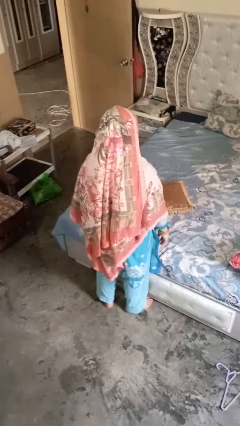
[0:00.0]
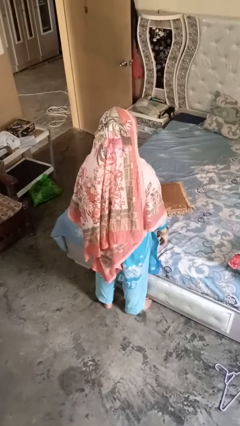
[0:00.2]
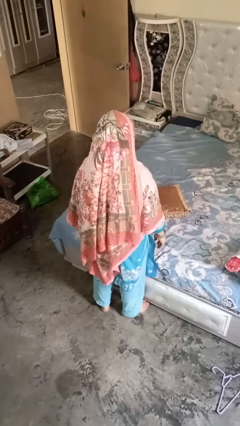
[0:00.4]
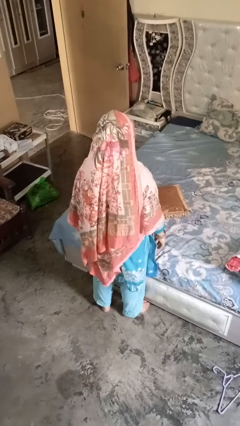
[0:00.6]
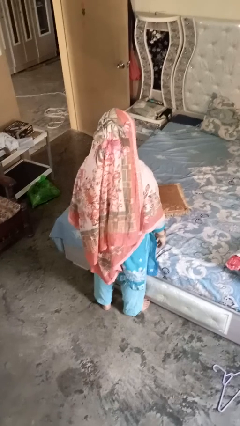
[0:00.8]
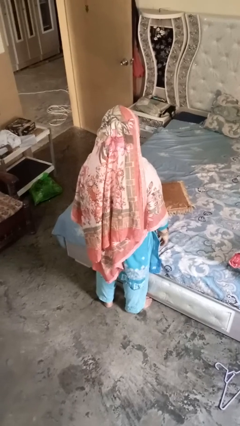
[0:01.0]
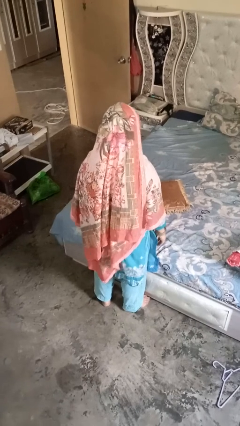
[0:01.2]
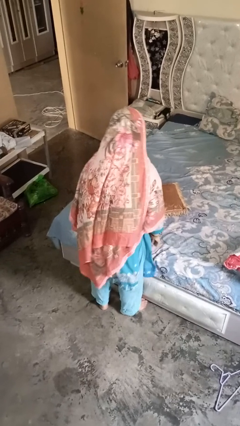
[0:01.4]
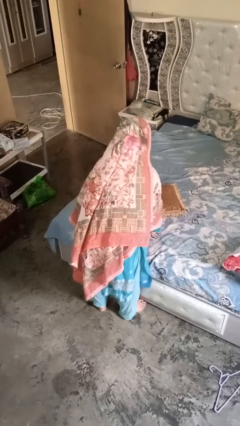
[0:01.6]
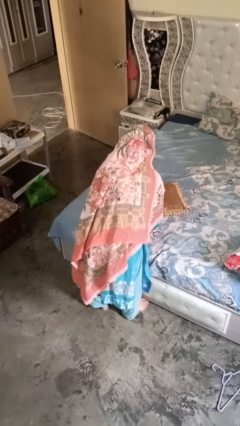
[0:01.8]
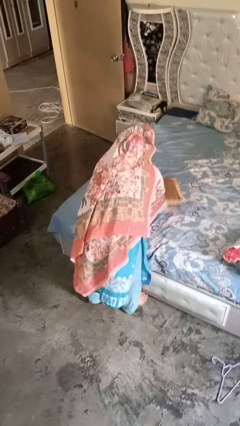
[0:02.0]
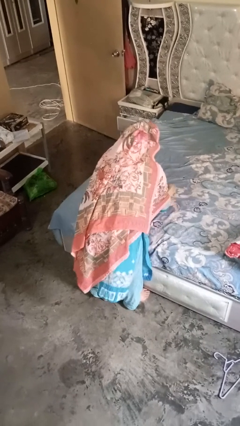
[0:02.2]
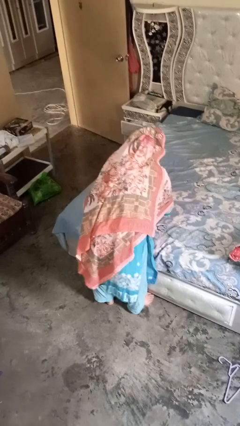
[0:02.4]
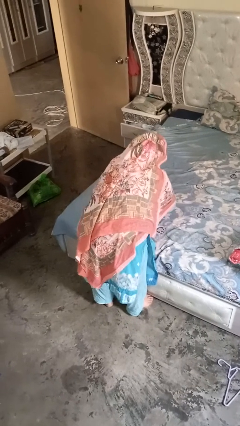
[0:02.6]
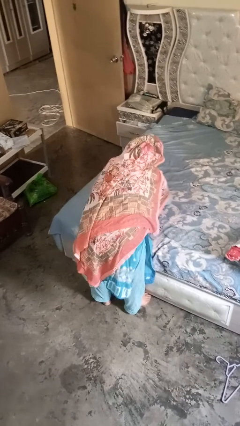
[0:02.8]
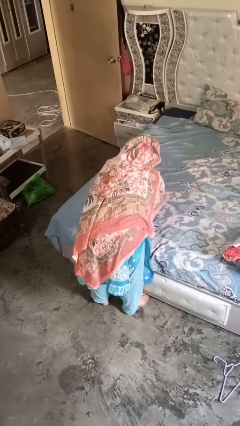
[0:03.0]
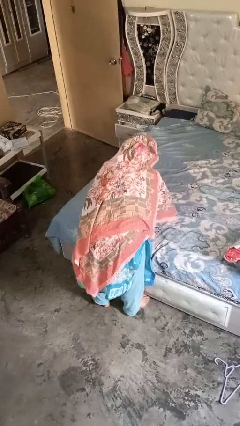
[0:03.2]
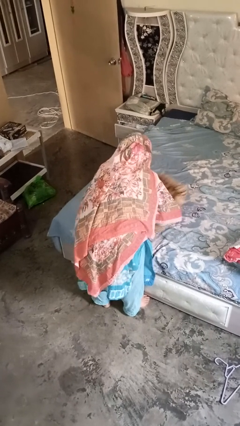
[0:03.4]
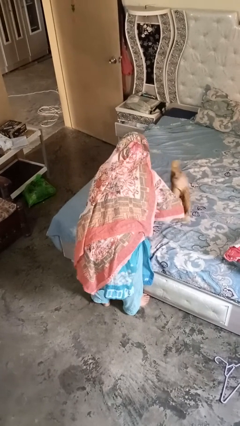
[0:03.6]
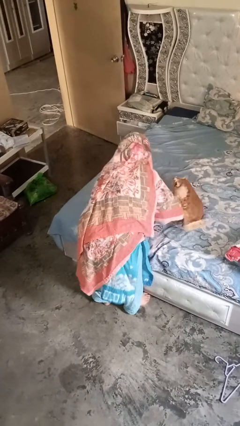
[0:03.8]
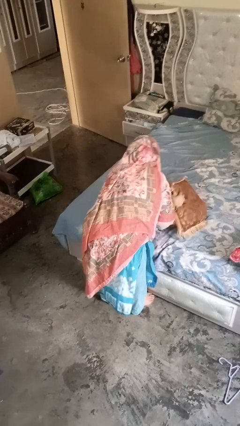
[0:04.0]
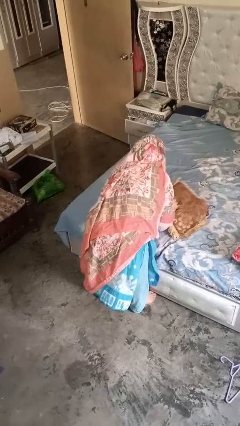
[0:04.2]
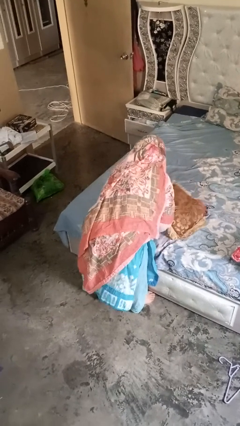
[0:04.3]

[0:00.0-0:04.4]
person searches under bed

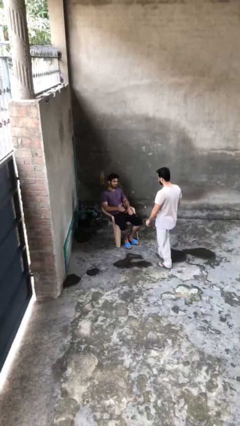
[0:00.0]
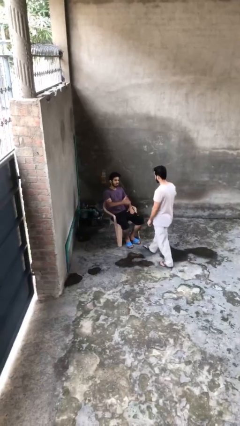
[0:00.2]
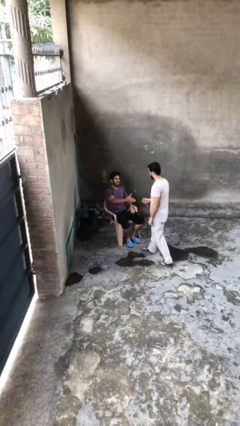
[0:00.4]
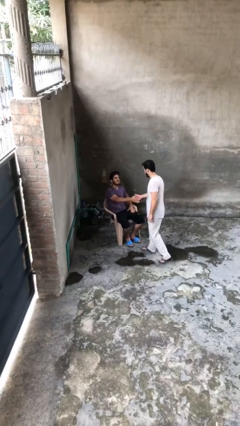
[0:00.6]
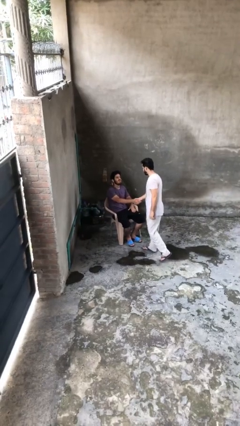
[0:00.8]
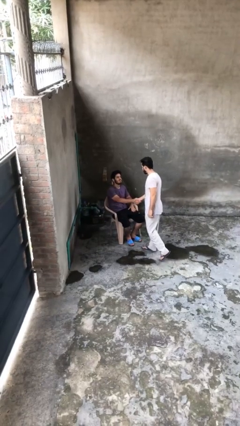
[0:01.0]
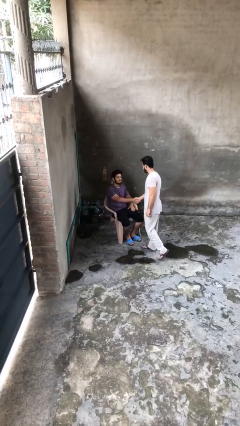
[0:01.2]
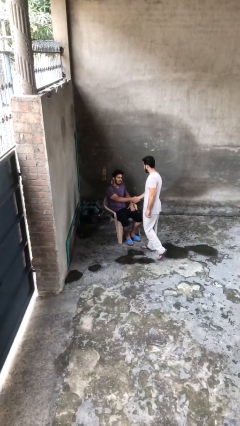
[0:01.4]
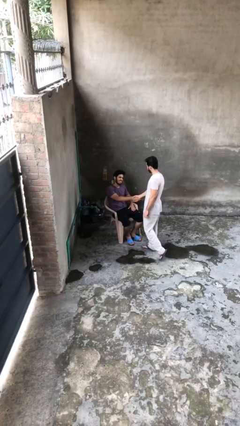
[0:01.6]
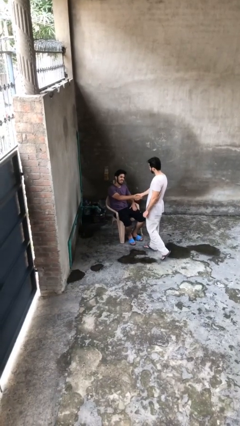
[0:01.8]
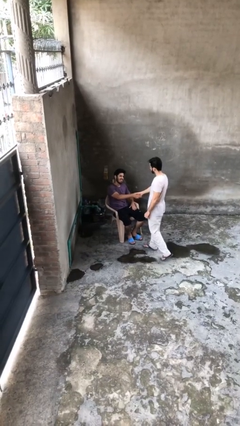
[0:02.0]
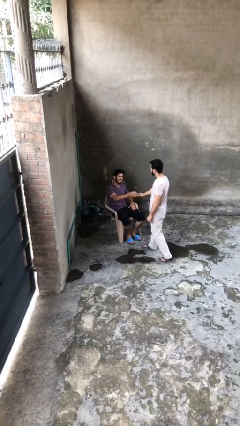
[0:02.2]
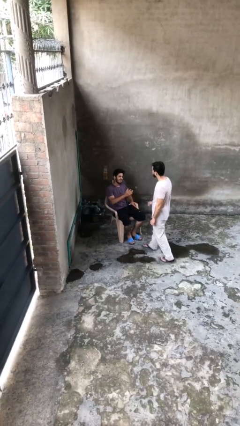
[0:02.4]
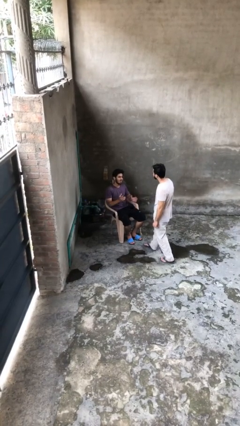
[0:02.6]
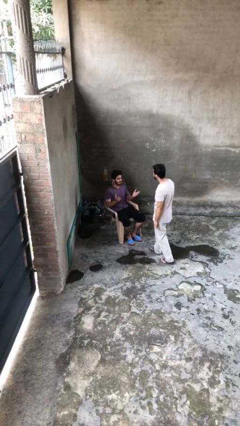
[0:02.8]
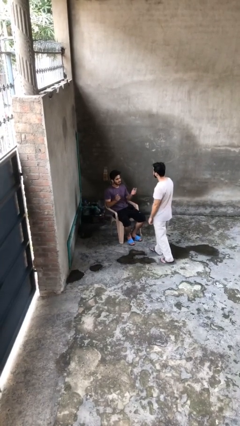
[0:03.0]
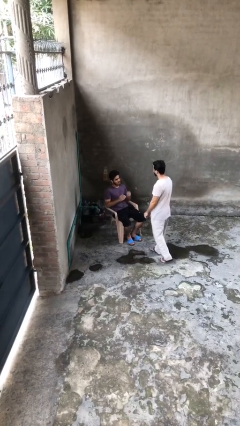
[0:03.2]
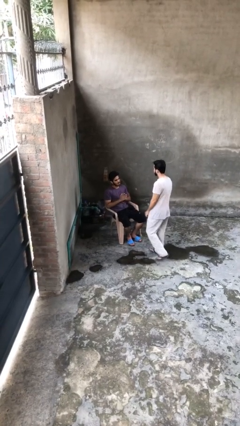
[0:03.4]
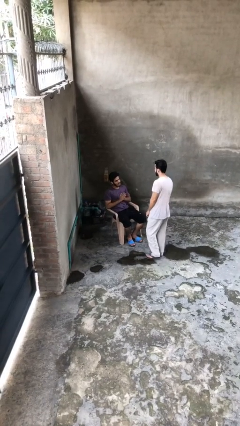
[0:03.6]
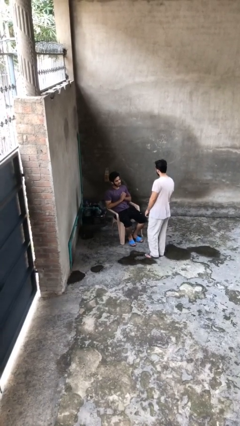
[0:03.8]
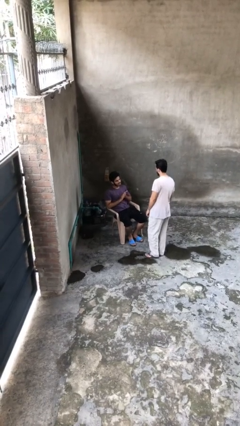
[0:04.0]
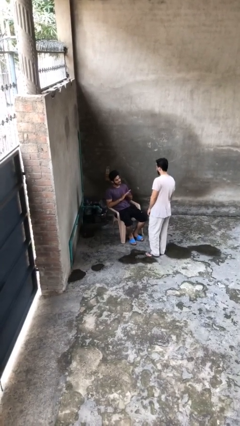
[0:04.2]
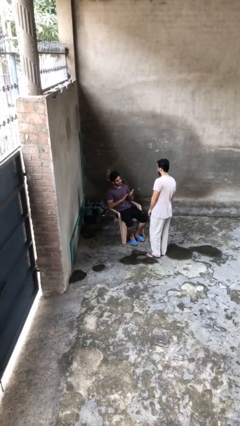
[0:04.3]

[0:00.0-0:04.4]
person shakes hand

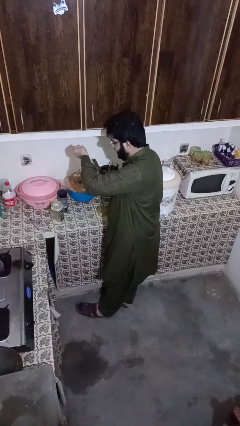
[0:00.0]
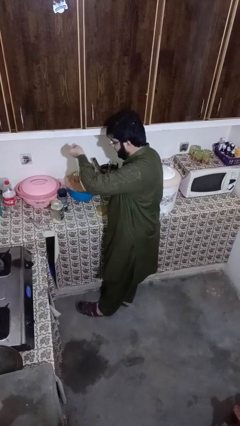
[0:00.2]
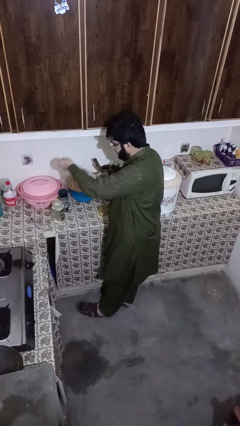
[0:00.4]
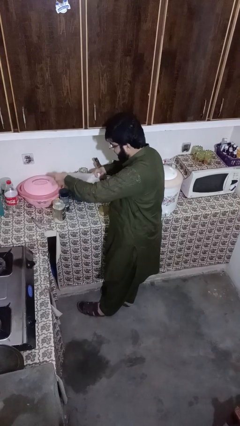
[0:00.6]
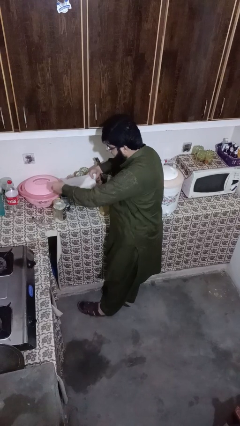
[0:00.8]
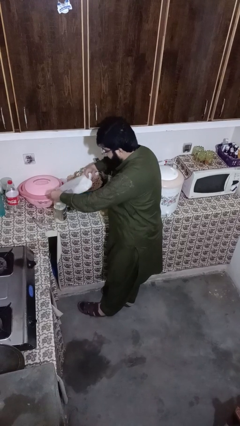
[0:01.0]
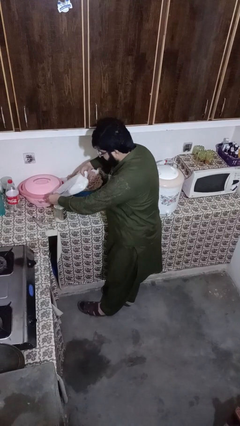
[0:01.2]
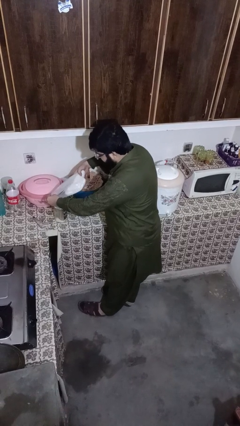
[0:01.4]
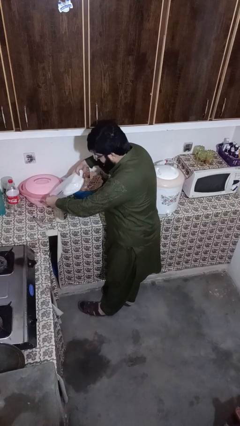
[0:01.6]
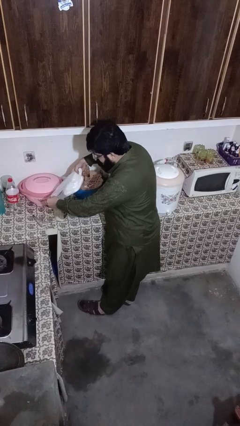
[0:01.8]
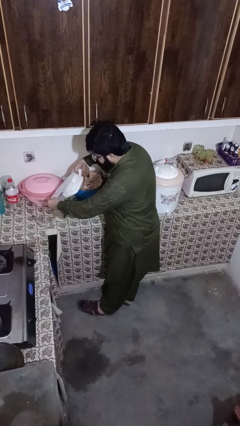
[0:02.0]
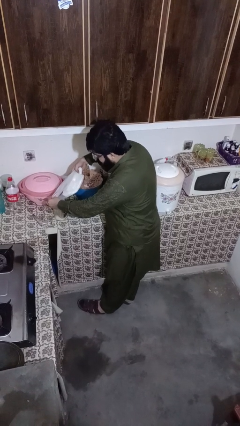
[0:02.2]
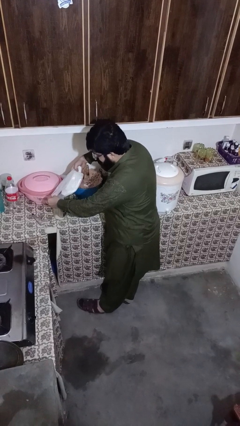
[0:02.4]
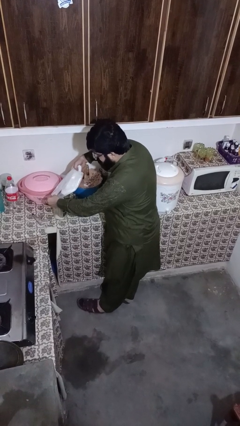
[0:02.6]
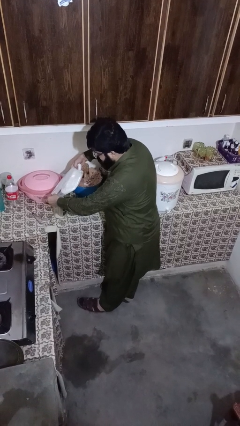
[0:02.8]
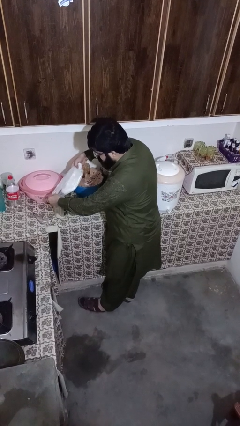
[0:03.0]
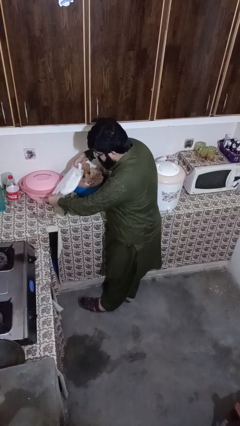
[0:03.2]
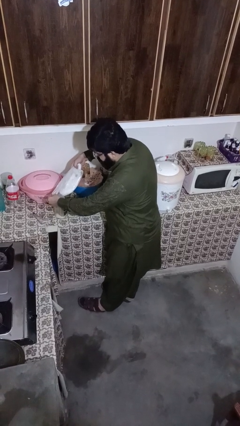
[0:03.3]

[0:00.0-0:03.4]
person pours into bowl

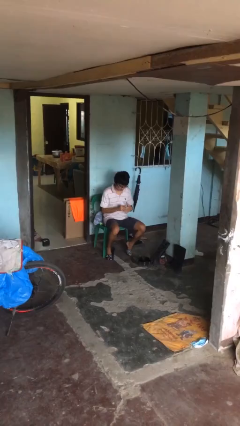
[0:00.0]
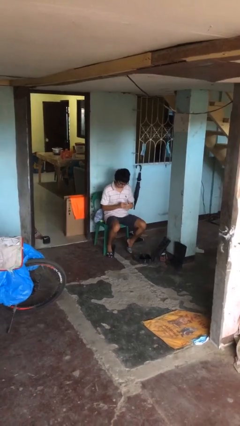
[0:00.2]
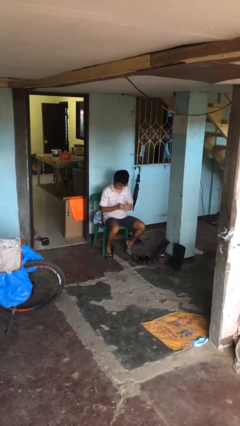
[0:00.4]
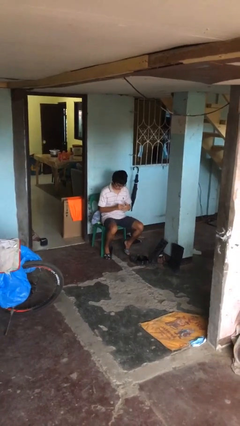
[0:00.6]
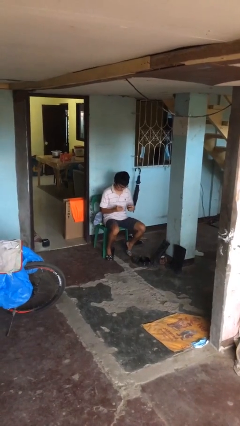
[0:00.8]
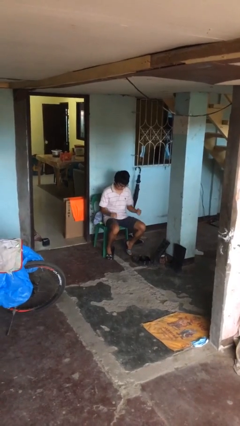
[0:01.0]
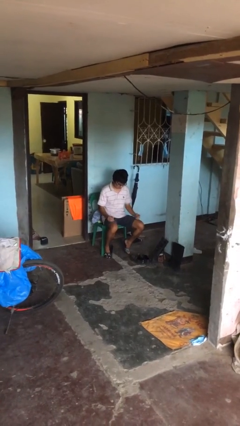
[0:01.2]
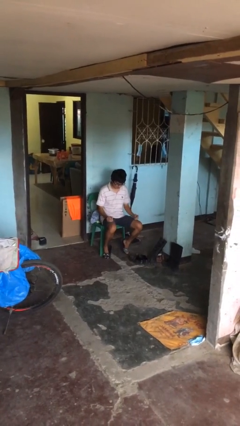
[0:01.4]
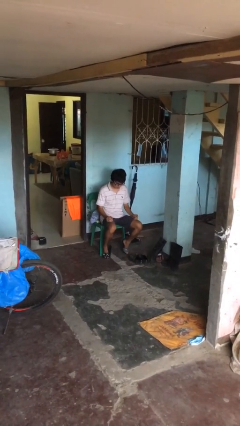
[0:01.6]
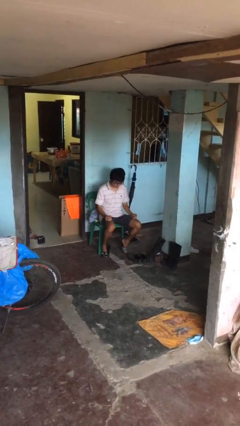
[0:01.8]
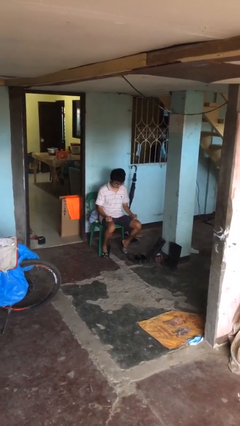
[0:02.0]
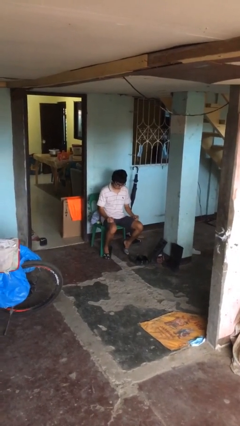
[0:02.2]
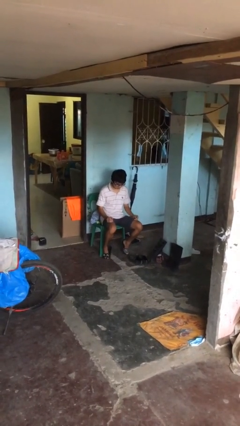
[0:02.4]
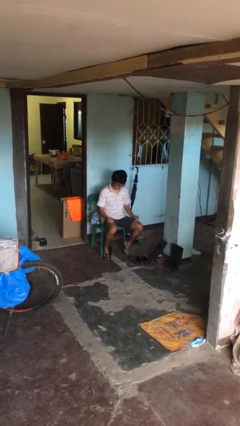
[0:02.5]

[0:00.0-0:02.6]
person takes off ring

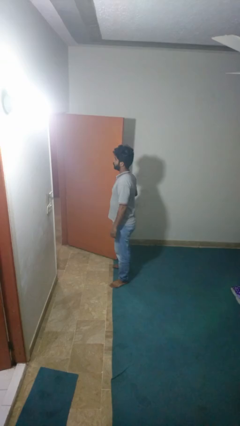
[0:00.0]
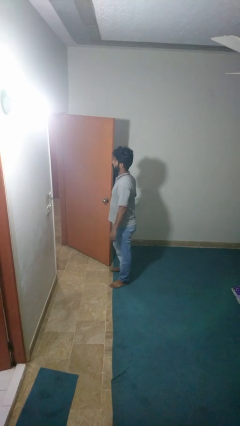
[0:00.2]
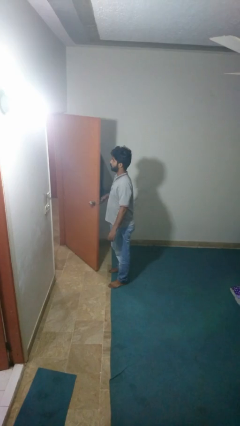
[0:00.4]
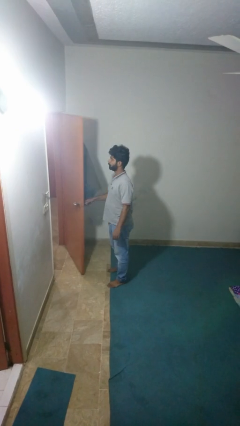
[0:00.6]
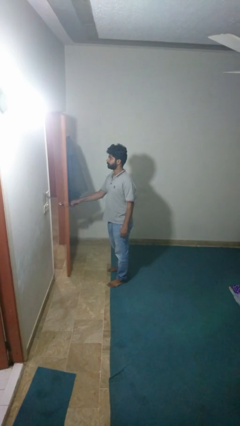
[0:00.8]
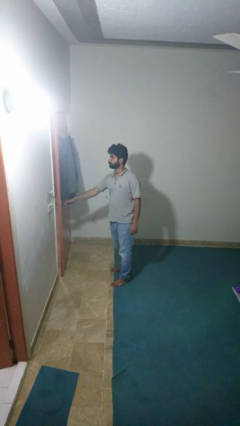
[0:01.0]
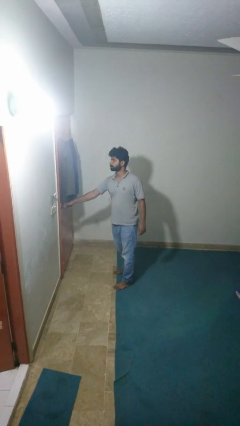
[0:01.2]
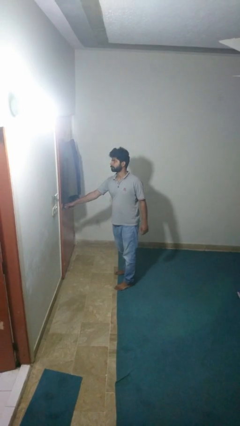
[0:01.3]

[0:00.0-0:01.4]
person closes facility door

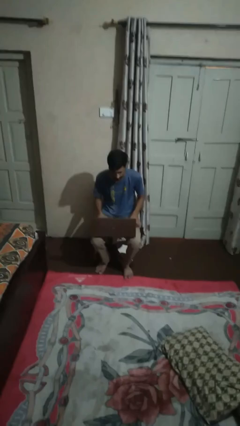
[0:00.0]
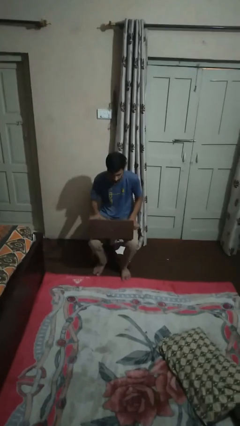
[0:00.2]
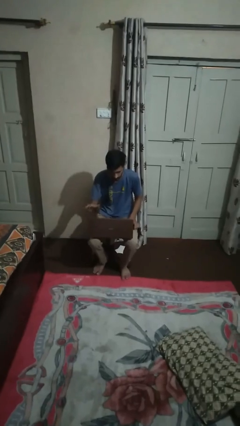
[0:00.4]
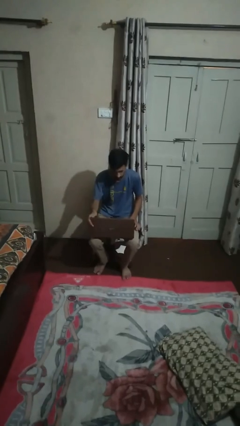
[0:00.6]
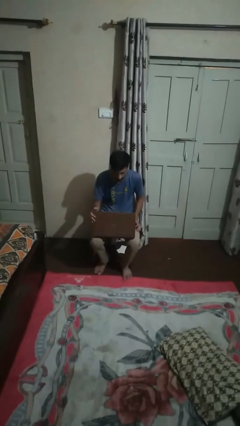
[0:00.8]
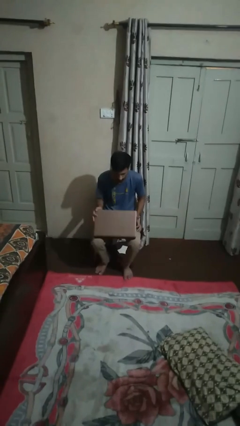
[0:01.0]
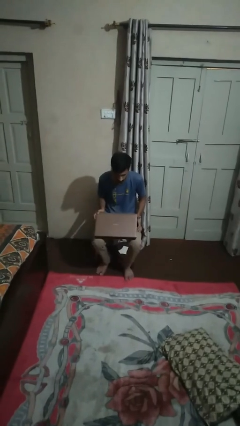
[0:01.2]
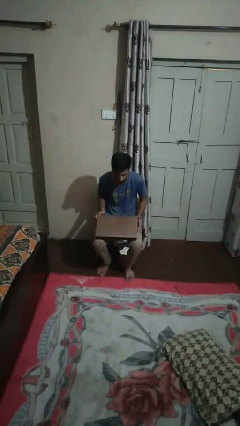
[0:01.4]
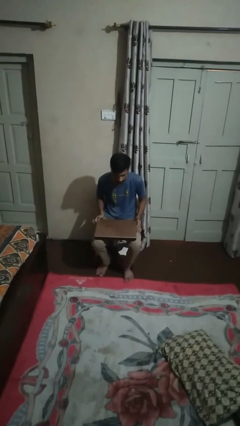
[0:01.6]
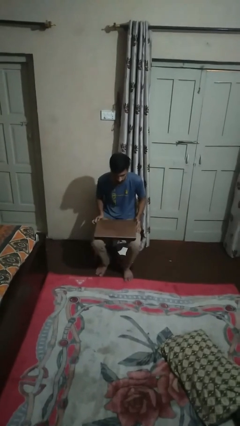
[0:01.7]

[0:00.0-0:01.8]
person closes laptop
